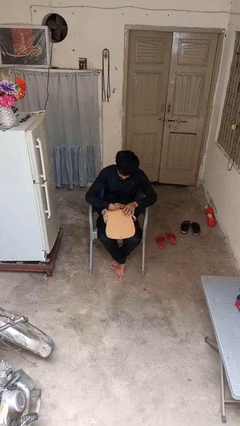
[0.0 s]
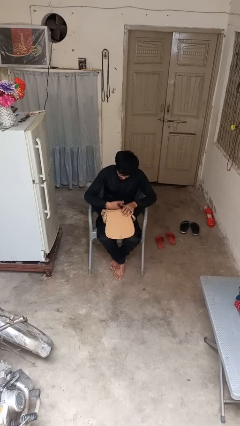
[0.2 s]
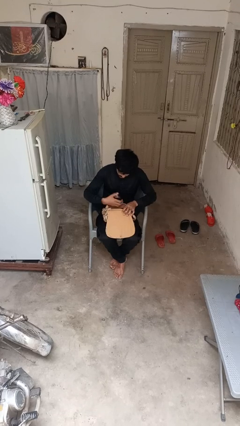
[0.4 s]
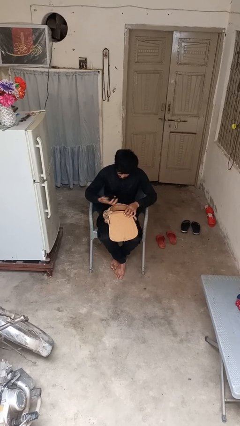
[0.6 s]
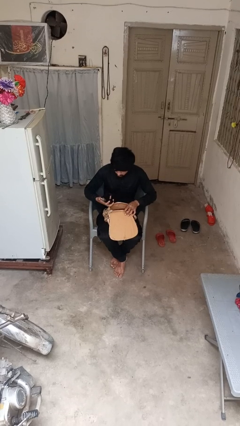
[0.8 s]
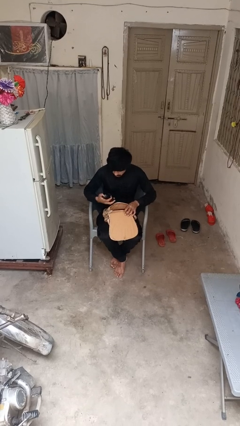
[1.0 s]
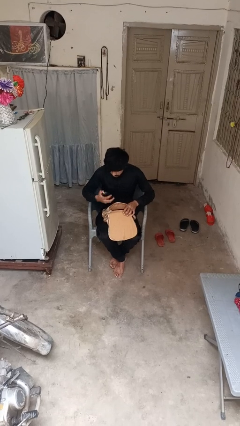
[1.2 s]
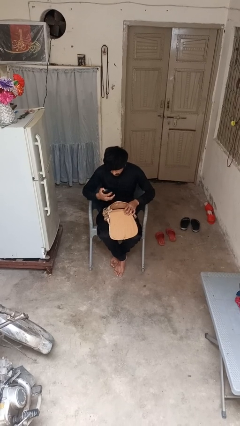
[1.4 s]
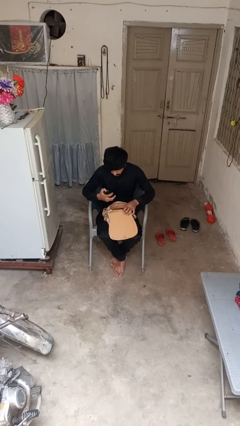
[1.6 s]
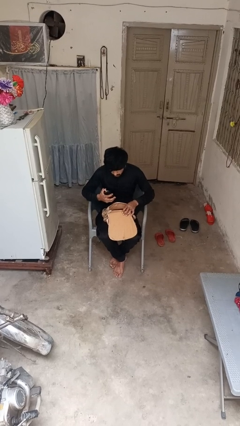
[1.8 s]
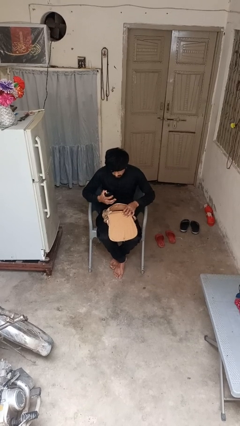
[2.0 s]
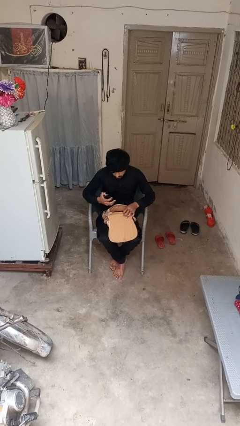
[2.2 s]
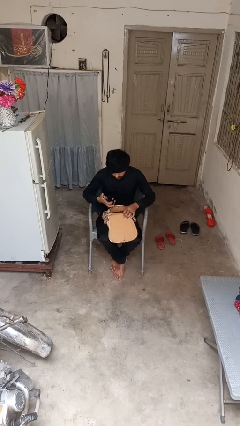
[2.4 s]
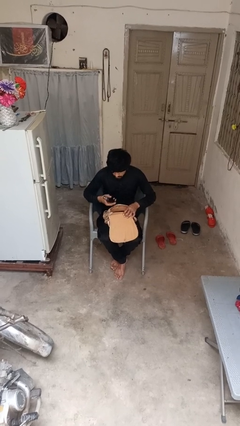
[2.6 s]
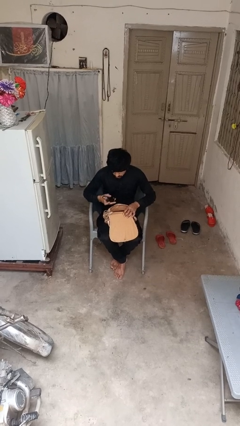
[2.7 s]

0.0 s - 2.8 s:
person takes object from purse

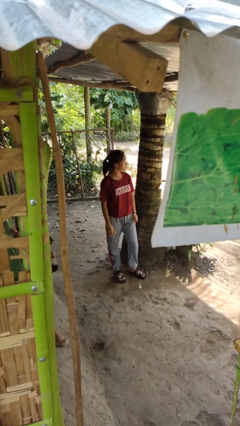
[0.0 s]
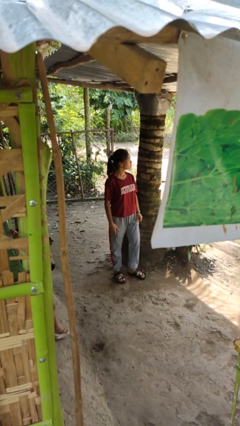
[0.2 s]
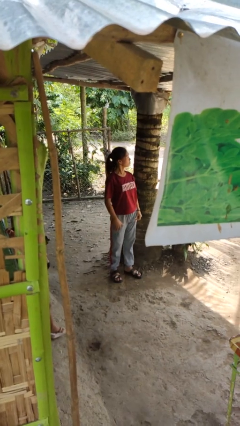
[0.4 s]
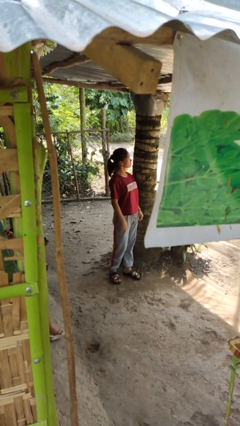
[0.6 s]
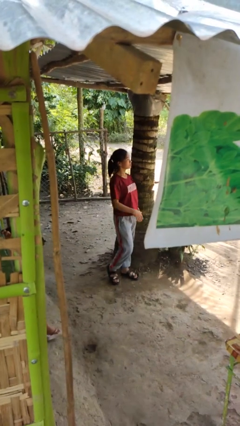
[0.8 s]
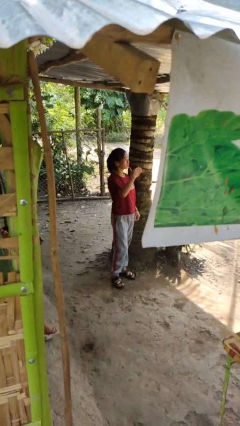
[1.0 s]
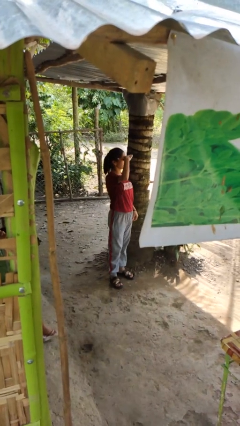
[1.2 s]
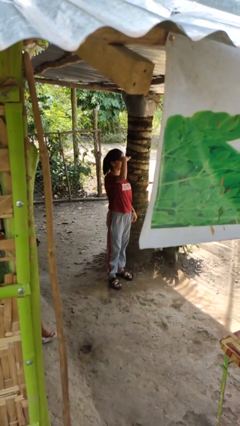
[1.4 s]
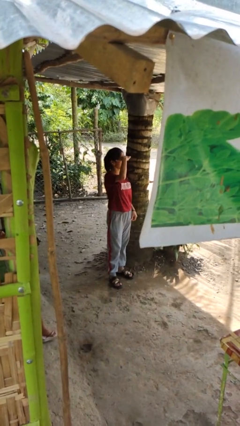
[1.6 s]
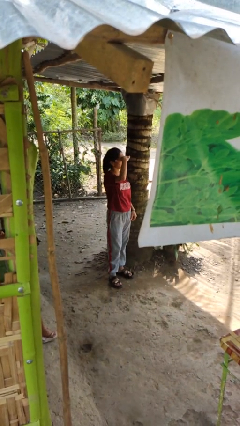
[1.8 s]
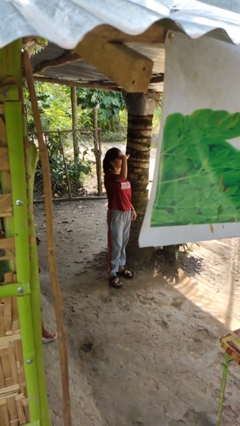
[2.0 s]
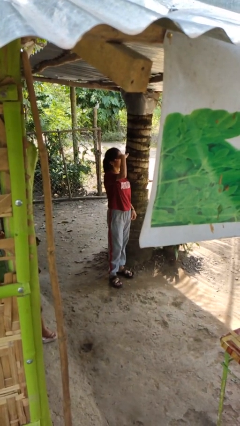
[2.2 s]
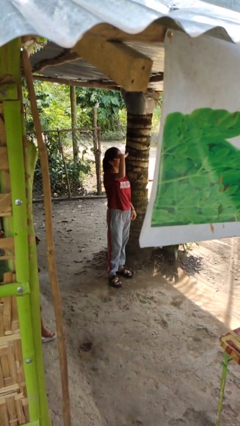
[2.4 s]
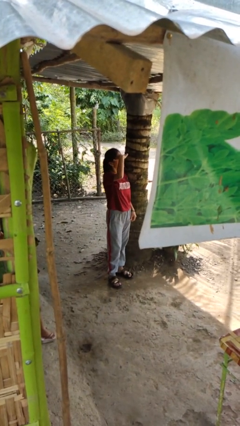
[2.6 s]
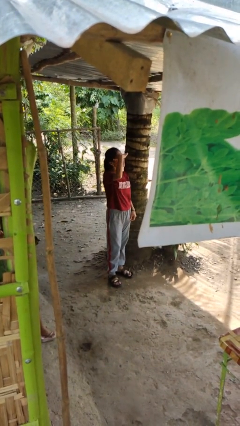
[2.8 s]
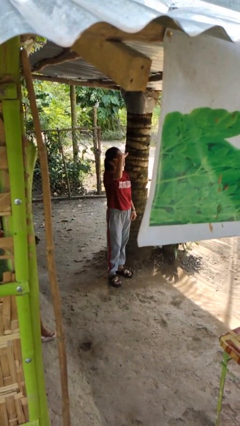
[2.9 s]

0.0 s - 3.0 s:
person shades eyes

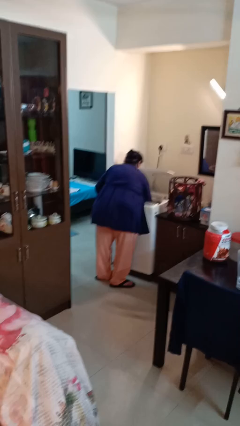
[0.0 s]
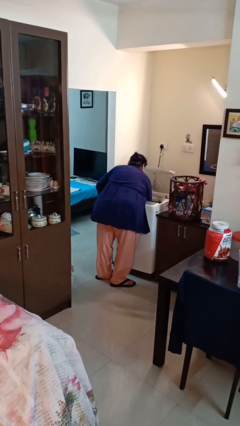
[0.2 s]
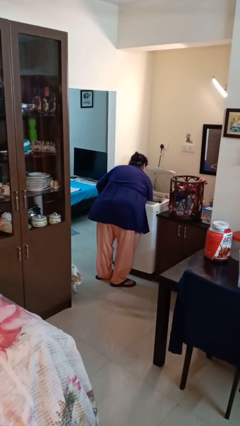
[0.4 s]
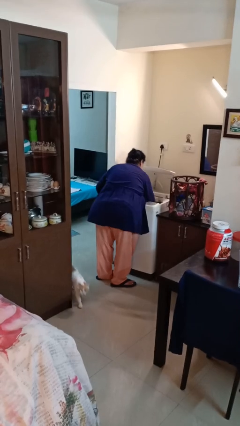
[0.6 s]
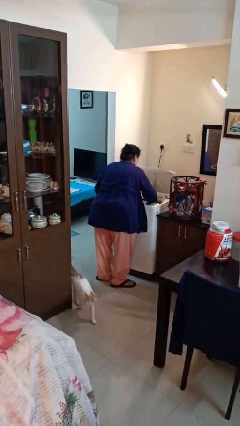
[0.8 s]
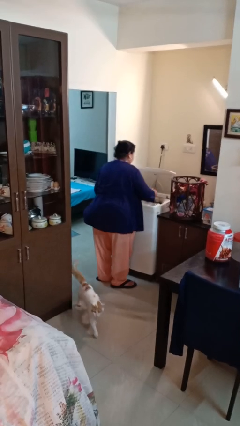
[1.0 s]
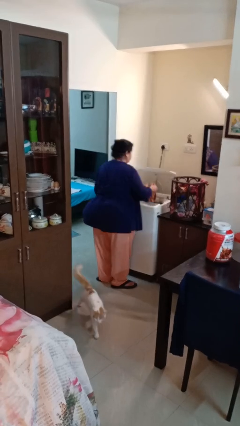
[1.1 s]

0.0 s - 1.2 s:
person unloads clotheswasher

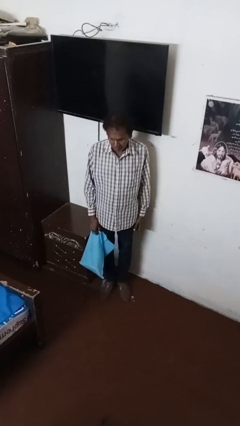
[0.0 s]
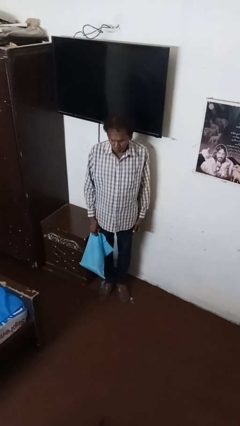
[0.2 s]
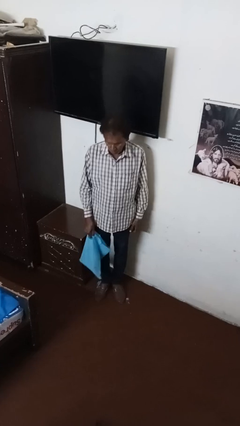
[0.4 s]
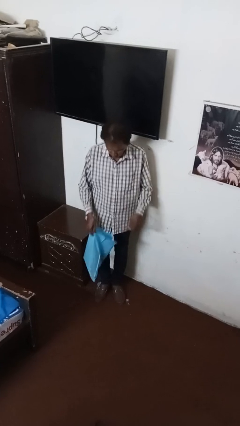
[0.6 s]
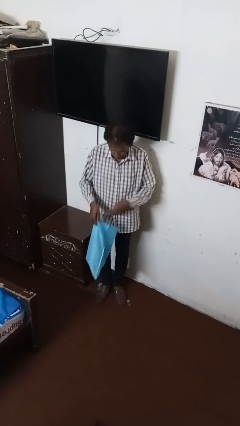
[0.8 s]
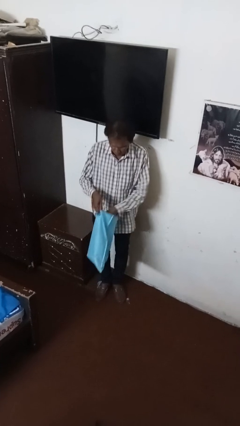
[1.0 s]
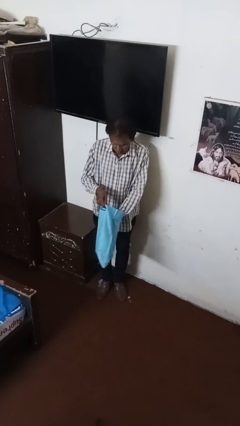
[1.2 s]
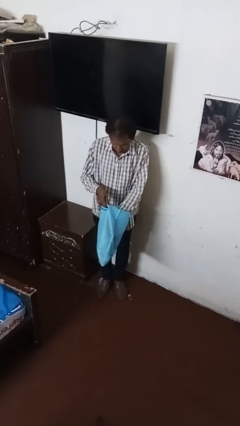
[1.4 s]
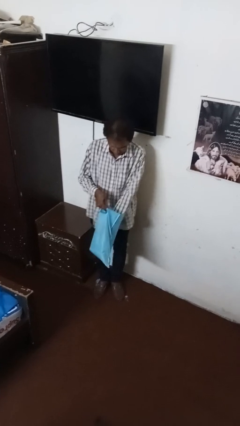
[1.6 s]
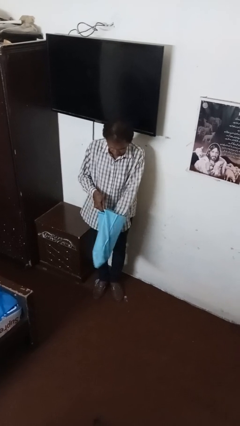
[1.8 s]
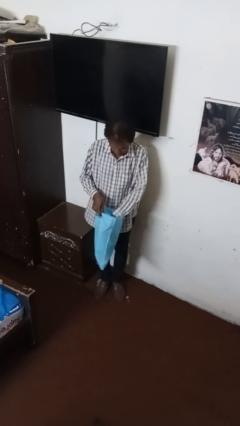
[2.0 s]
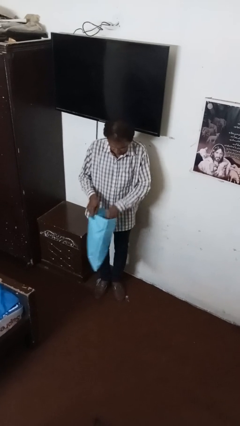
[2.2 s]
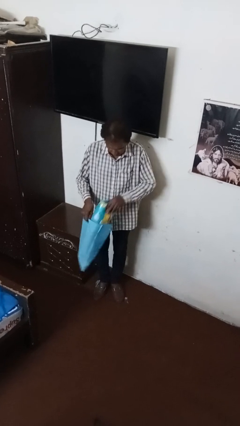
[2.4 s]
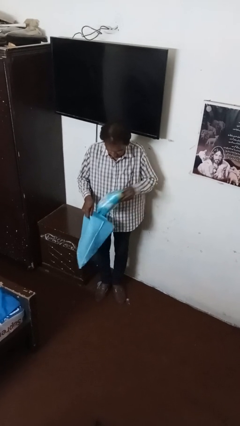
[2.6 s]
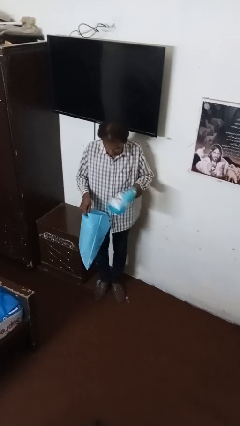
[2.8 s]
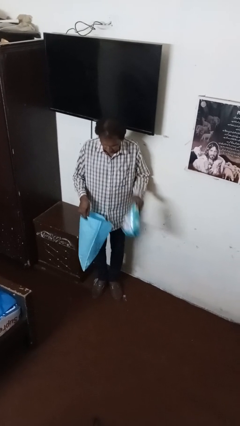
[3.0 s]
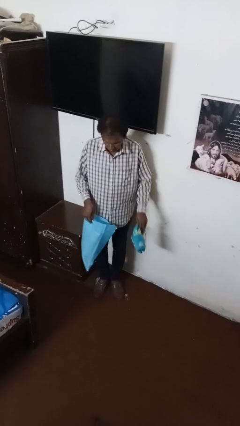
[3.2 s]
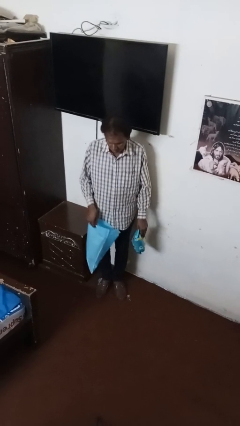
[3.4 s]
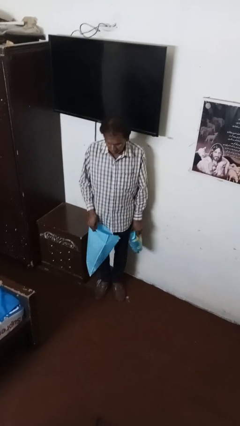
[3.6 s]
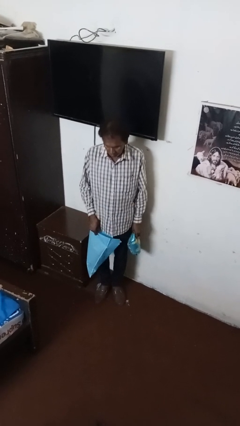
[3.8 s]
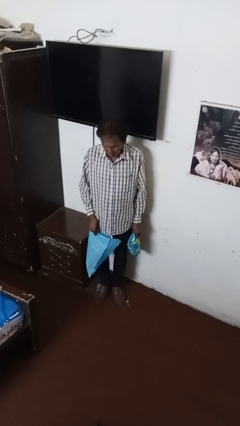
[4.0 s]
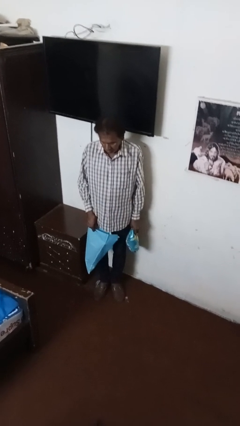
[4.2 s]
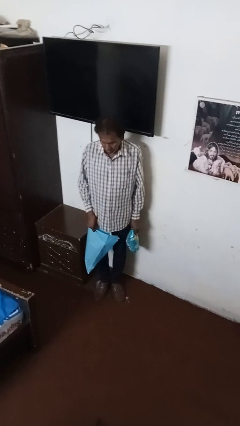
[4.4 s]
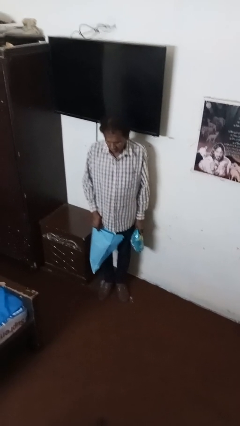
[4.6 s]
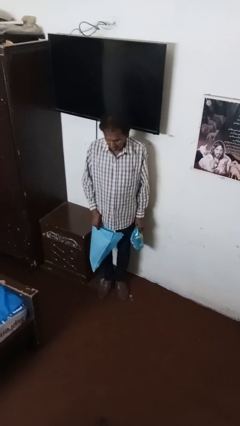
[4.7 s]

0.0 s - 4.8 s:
person searches in bag

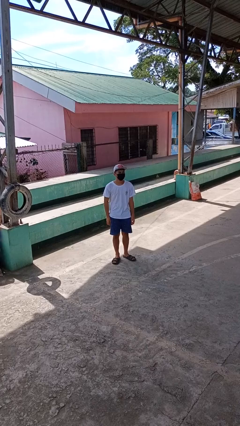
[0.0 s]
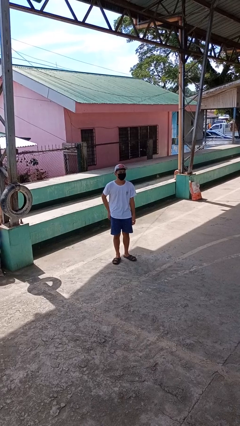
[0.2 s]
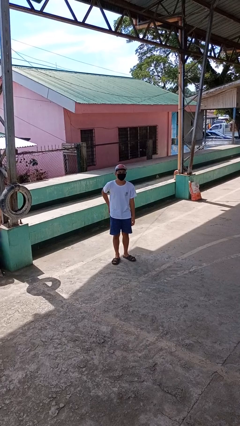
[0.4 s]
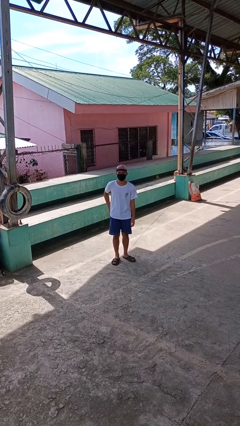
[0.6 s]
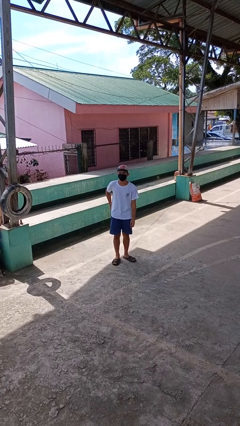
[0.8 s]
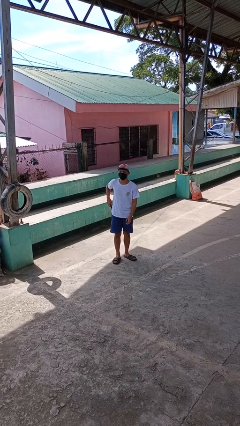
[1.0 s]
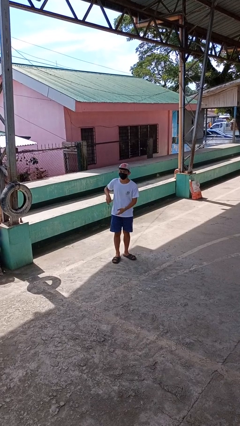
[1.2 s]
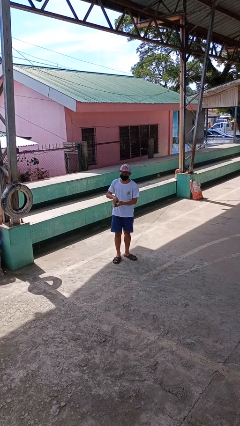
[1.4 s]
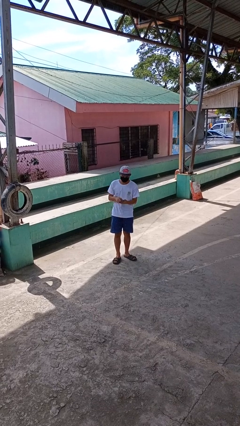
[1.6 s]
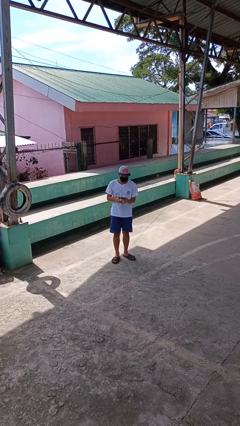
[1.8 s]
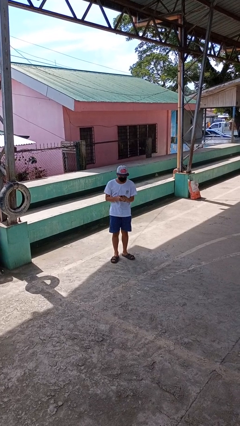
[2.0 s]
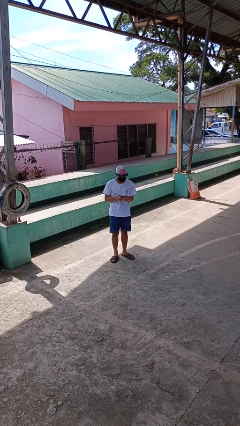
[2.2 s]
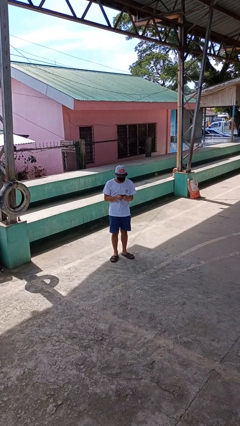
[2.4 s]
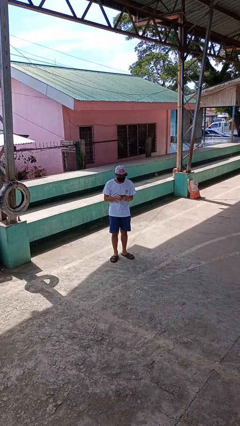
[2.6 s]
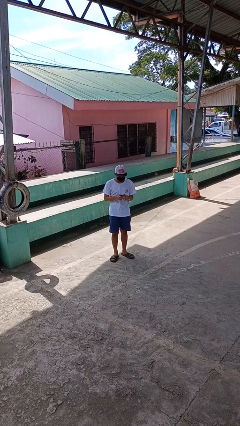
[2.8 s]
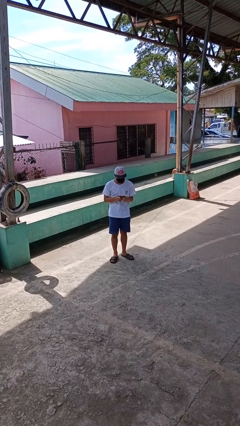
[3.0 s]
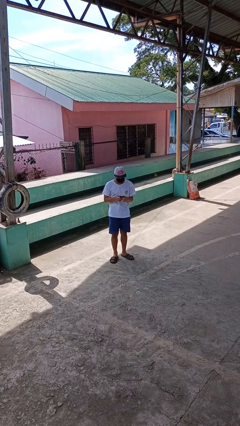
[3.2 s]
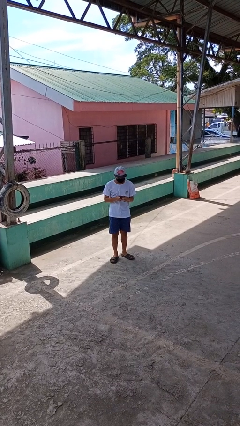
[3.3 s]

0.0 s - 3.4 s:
person takes phone from pocket

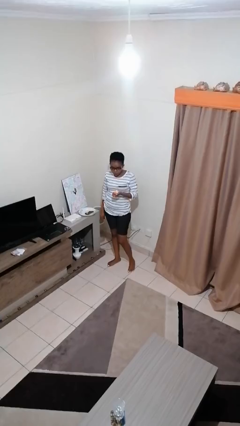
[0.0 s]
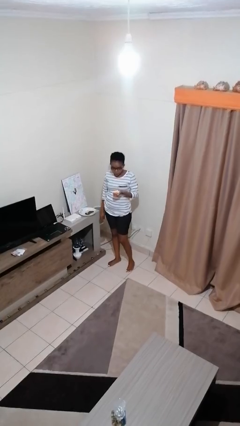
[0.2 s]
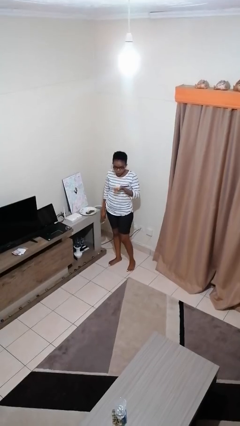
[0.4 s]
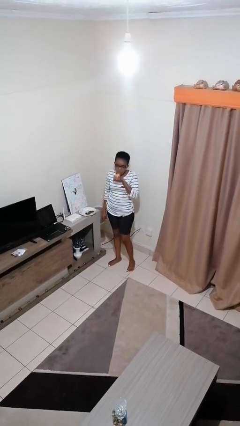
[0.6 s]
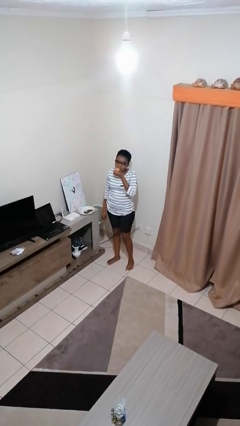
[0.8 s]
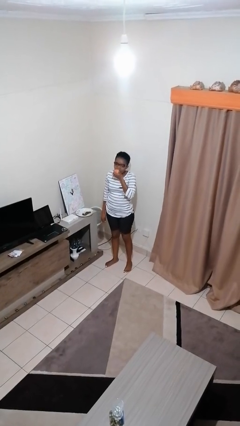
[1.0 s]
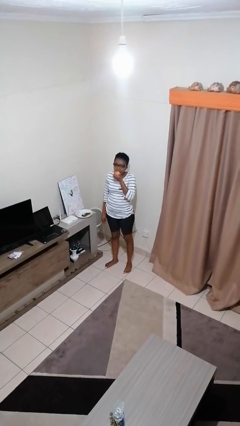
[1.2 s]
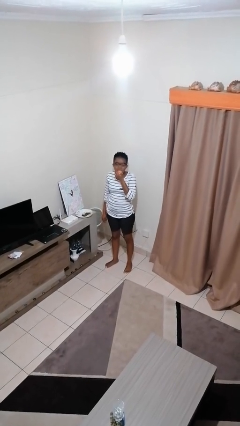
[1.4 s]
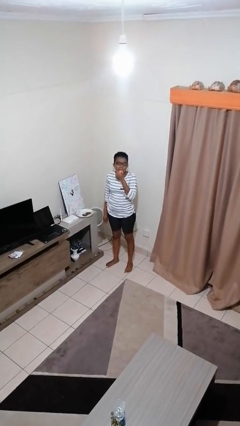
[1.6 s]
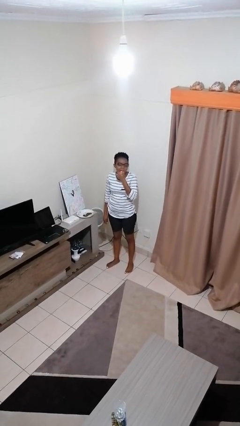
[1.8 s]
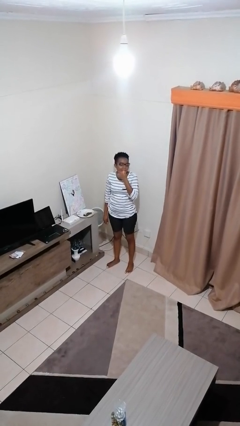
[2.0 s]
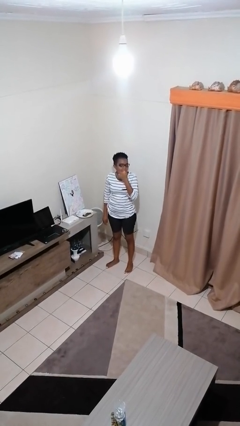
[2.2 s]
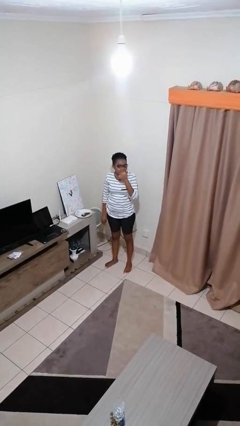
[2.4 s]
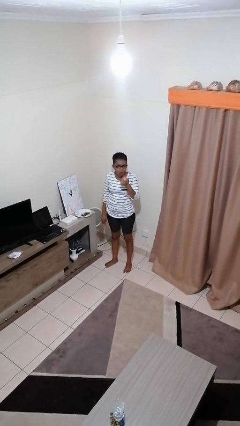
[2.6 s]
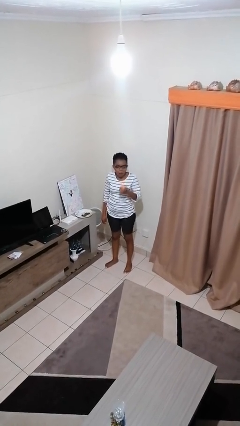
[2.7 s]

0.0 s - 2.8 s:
person eats apple
